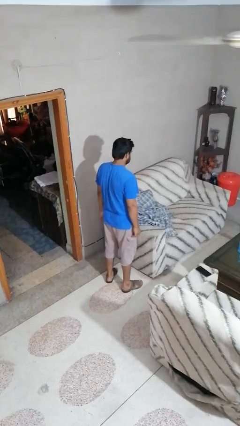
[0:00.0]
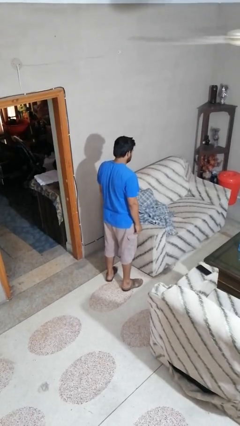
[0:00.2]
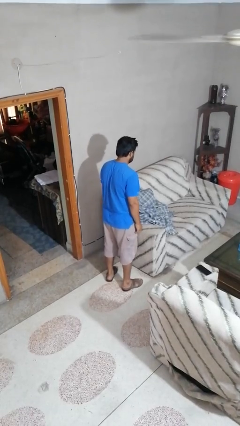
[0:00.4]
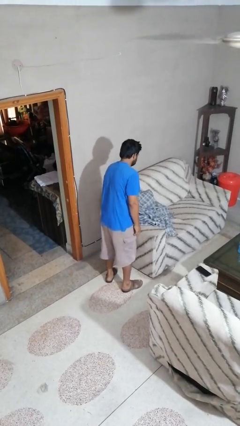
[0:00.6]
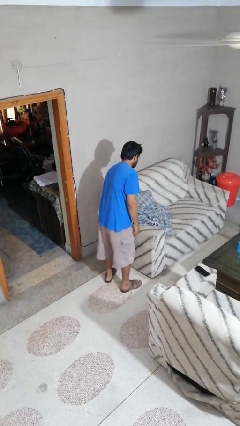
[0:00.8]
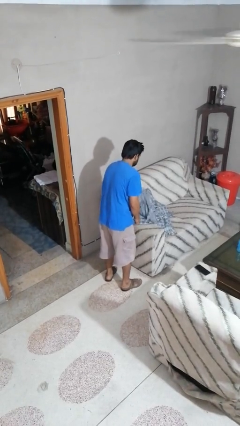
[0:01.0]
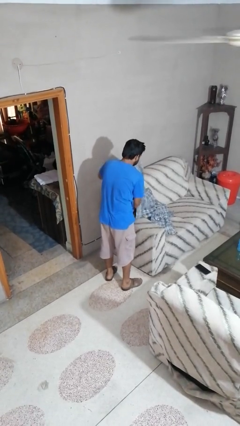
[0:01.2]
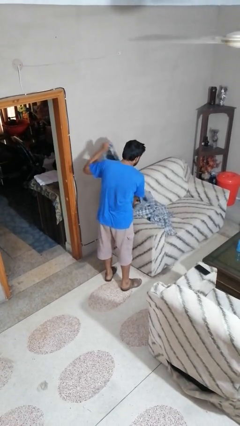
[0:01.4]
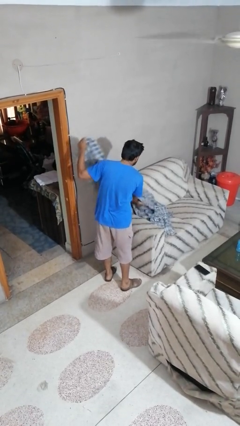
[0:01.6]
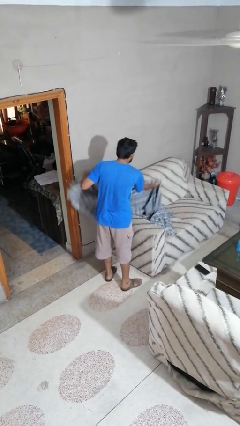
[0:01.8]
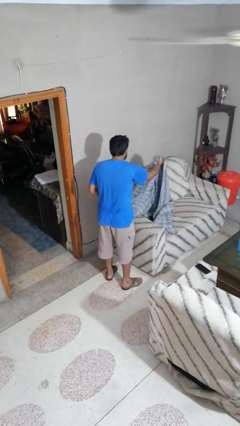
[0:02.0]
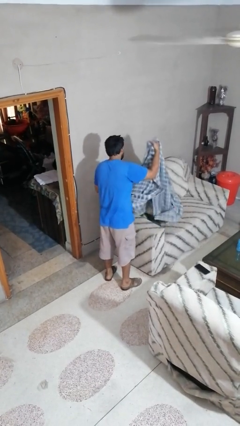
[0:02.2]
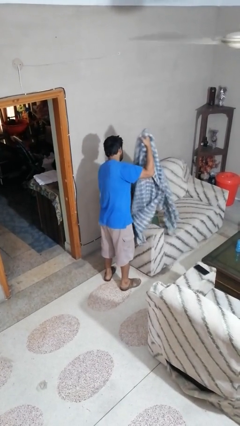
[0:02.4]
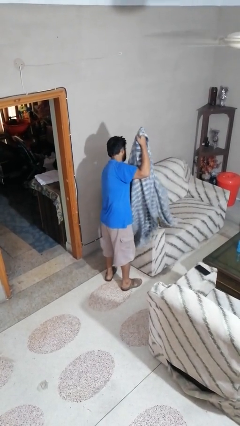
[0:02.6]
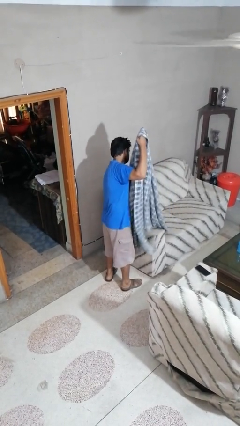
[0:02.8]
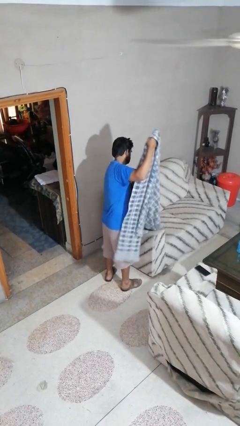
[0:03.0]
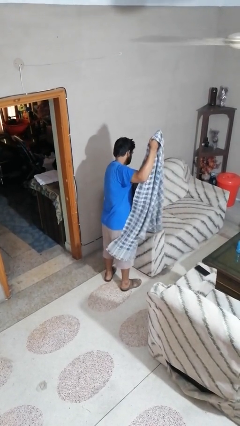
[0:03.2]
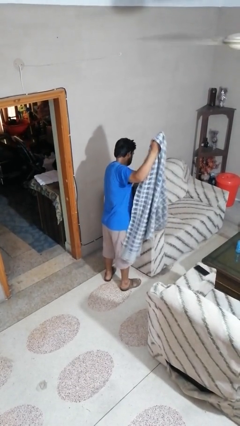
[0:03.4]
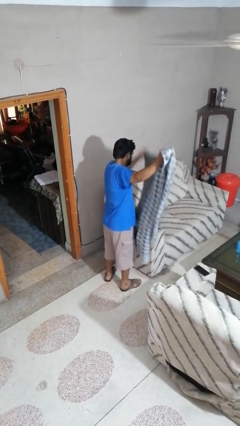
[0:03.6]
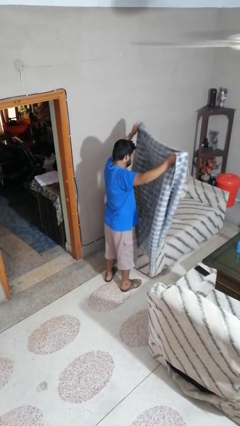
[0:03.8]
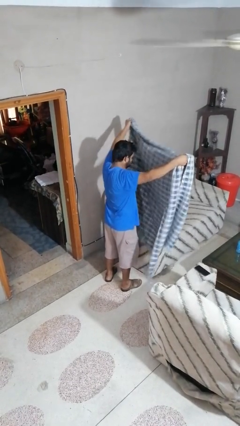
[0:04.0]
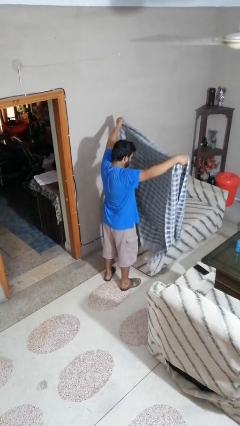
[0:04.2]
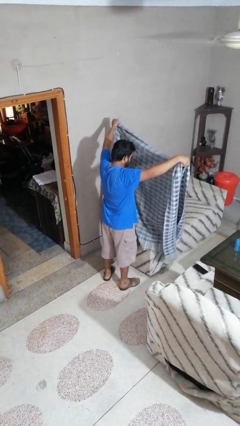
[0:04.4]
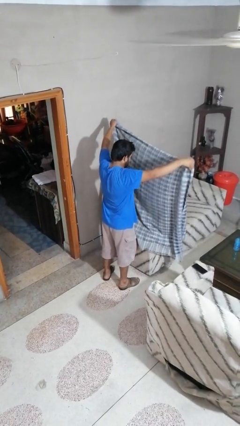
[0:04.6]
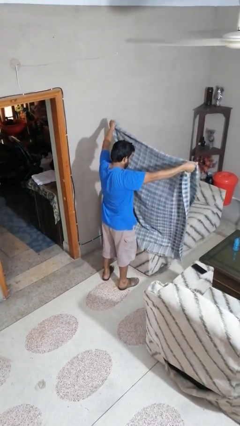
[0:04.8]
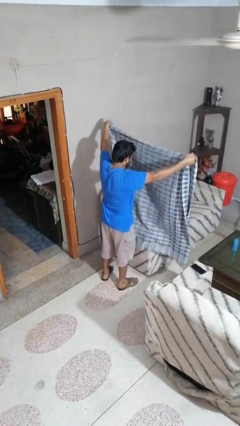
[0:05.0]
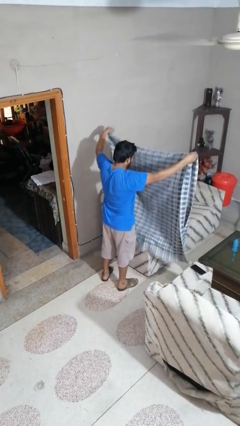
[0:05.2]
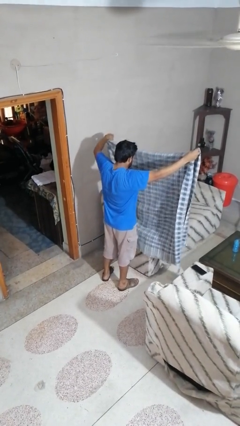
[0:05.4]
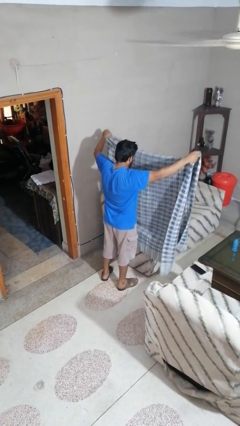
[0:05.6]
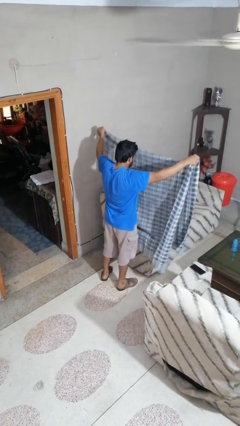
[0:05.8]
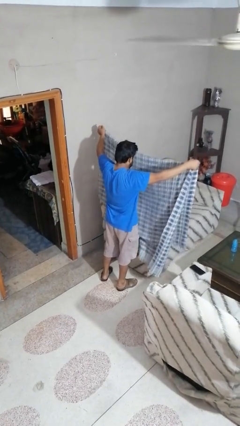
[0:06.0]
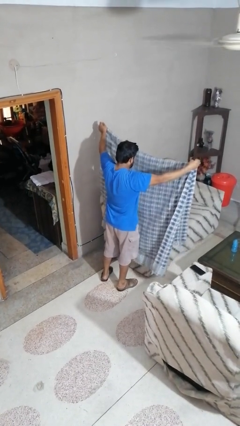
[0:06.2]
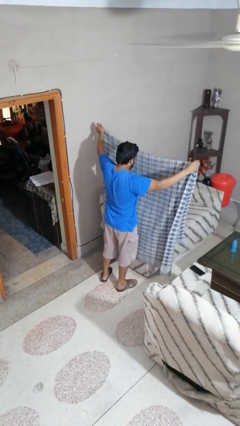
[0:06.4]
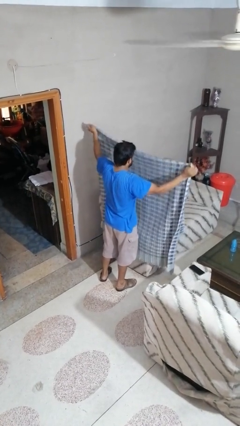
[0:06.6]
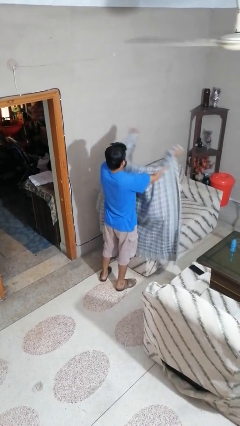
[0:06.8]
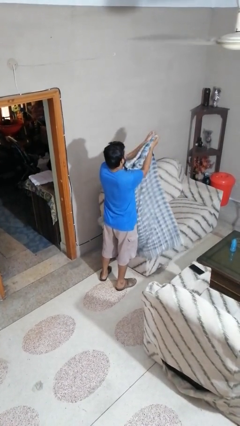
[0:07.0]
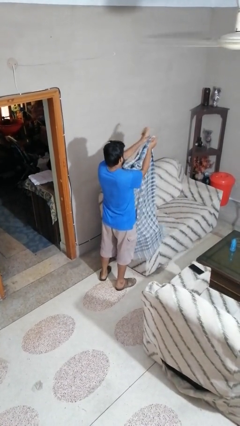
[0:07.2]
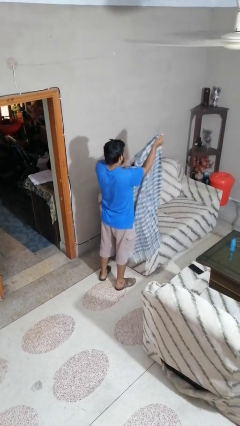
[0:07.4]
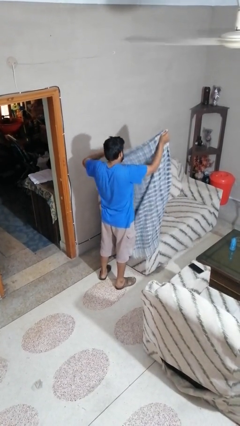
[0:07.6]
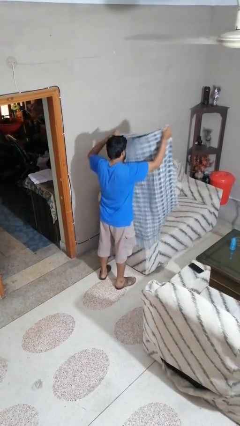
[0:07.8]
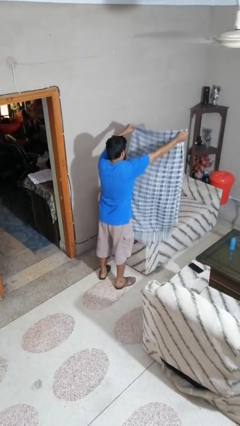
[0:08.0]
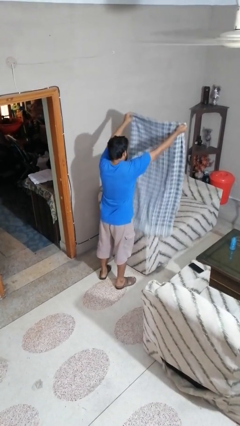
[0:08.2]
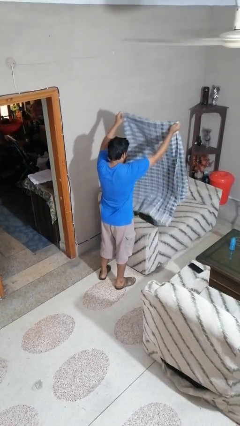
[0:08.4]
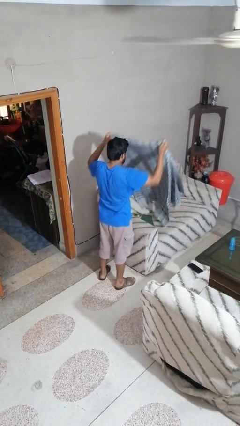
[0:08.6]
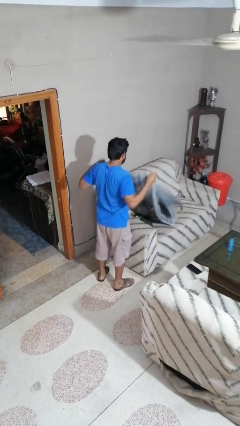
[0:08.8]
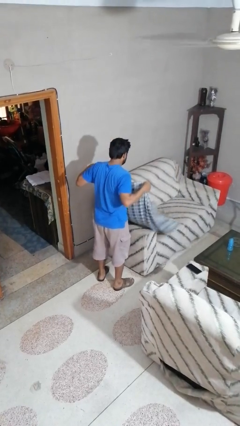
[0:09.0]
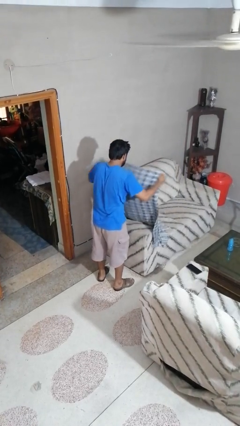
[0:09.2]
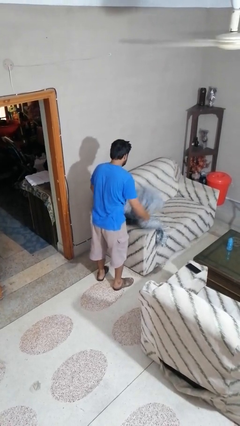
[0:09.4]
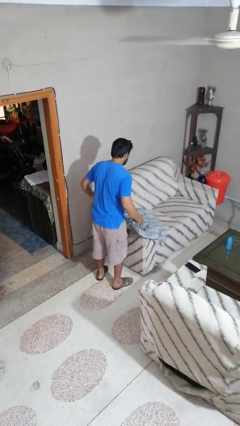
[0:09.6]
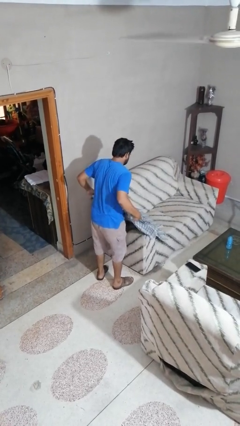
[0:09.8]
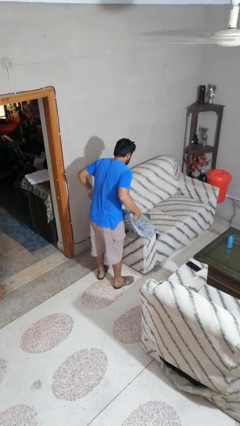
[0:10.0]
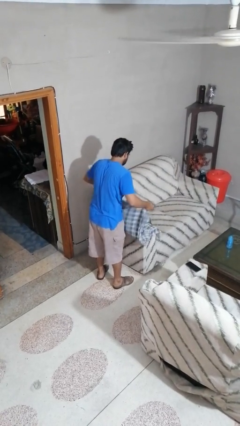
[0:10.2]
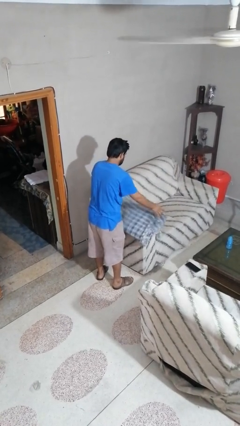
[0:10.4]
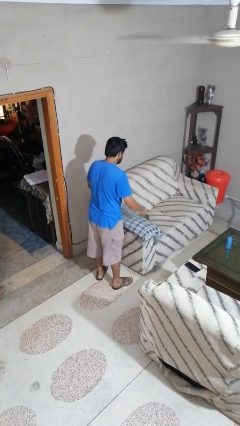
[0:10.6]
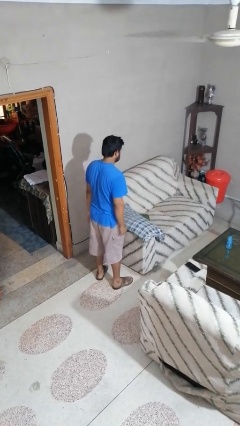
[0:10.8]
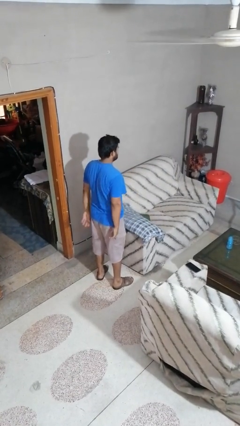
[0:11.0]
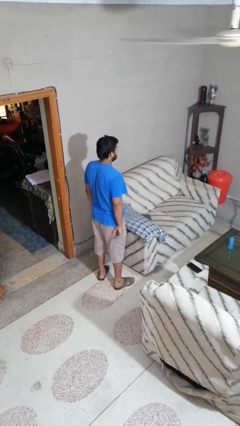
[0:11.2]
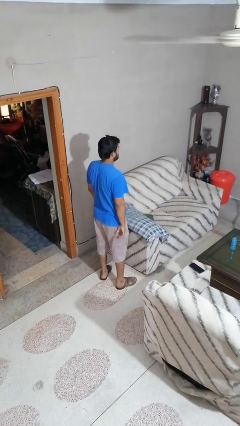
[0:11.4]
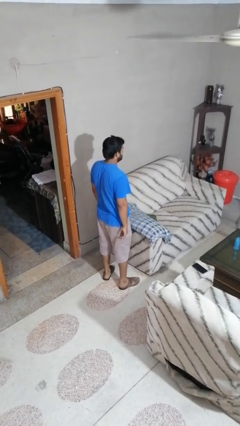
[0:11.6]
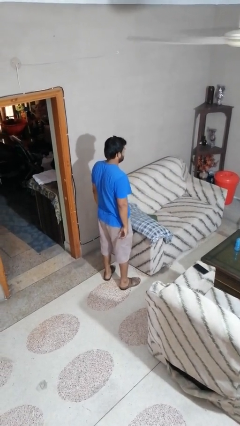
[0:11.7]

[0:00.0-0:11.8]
person folds blanket

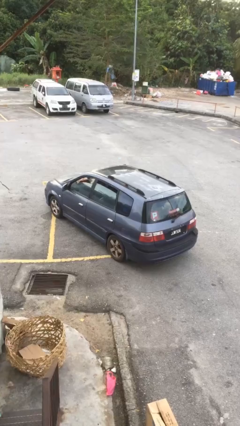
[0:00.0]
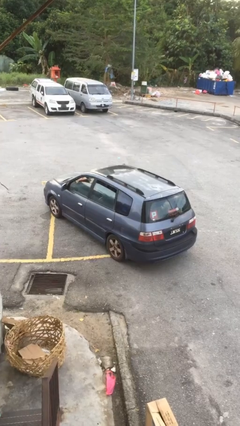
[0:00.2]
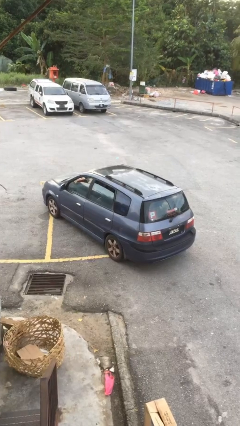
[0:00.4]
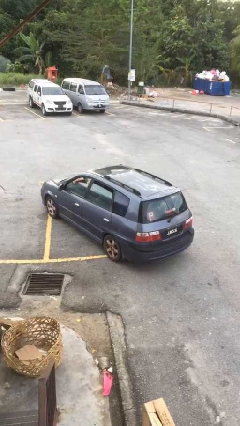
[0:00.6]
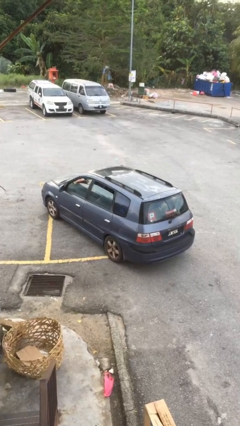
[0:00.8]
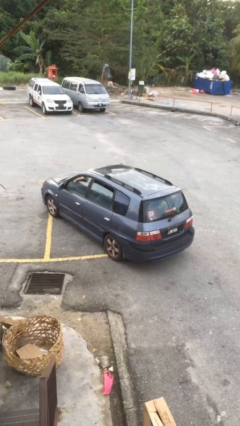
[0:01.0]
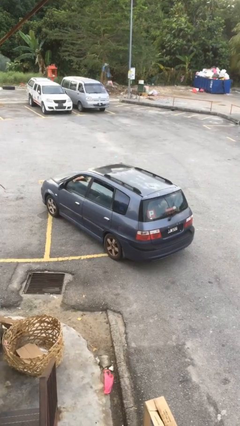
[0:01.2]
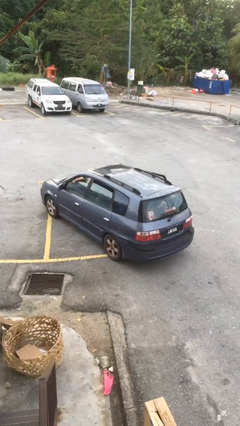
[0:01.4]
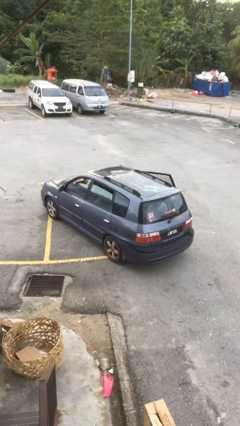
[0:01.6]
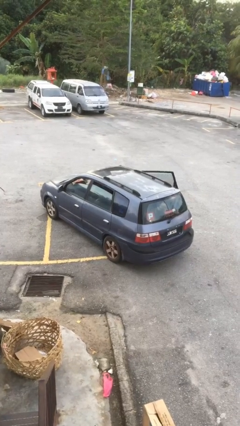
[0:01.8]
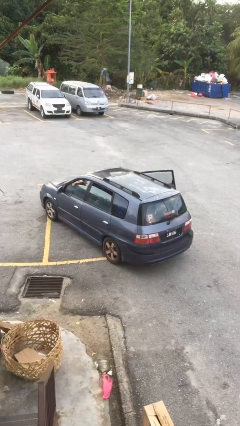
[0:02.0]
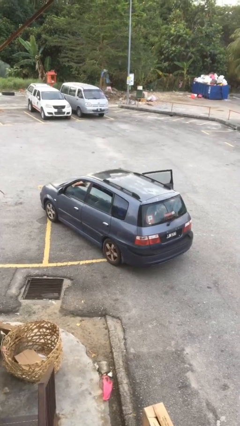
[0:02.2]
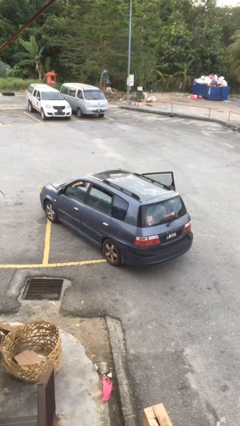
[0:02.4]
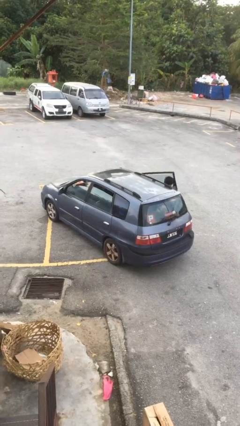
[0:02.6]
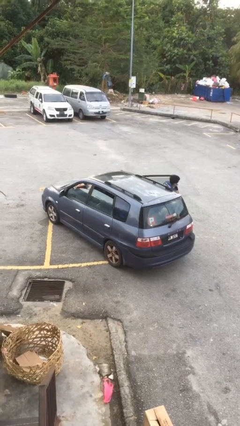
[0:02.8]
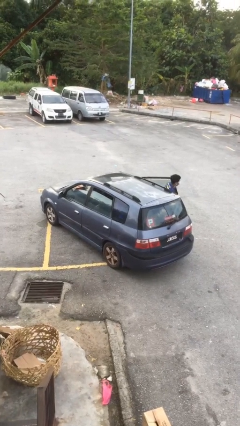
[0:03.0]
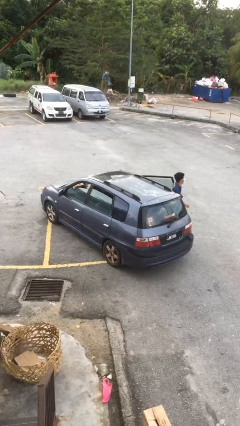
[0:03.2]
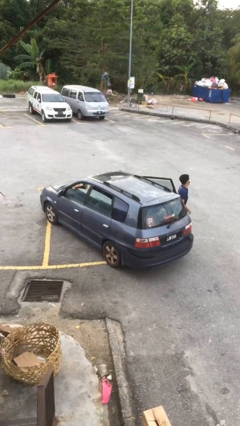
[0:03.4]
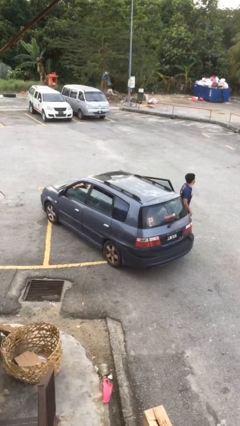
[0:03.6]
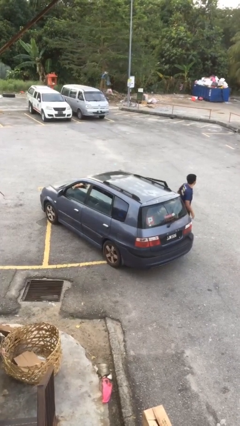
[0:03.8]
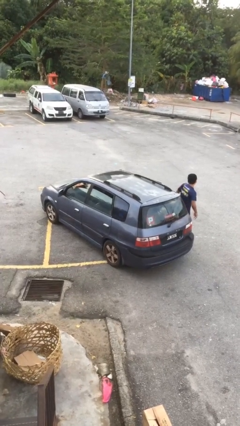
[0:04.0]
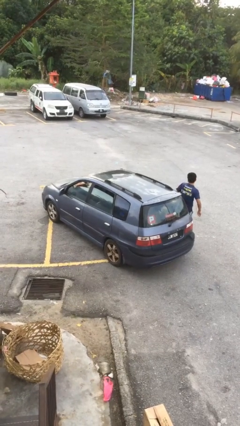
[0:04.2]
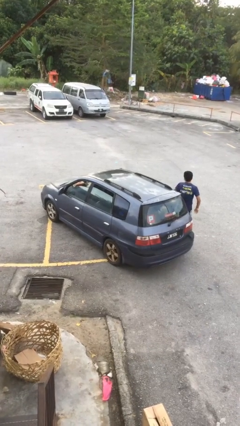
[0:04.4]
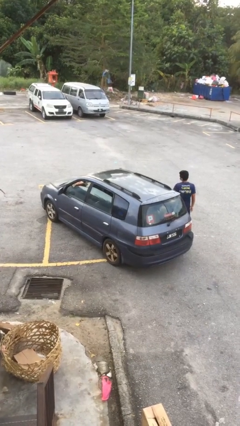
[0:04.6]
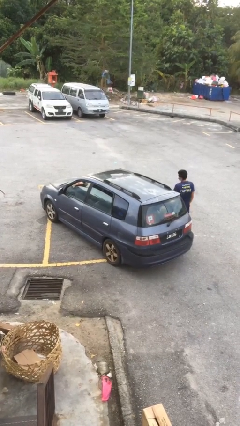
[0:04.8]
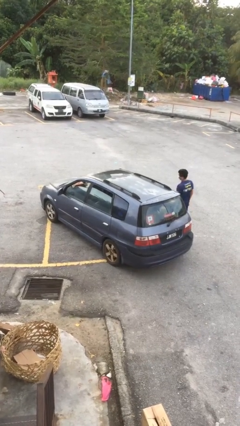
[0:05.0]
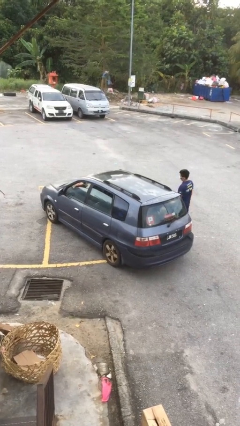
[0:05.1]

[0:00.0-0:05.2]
car drops off person

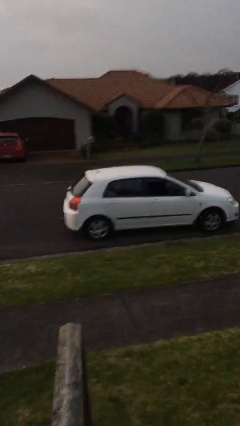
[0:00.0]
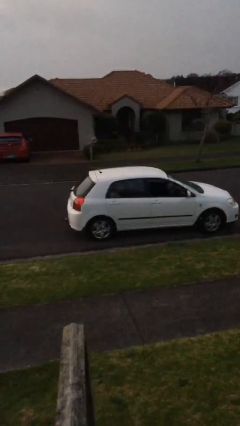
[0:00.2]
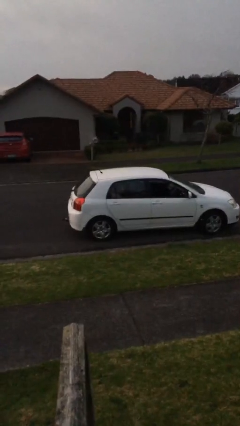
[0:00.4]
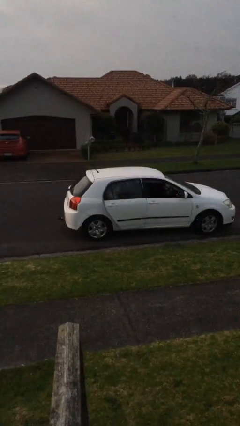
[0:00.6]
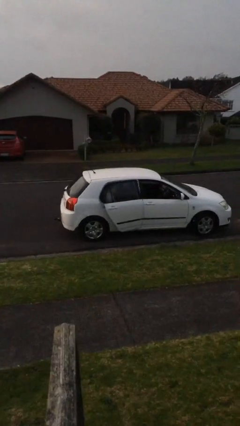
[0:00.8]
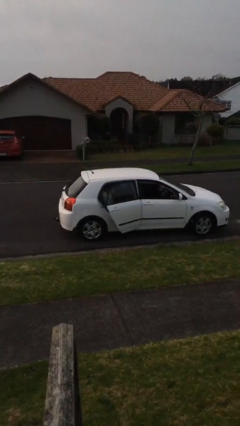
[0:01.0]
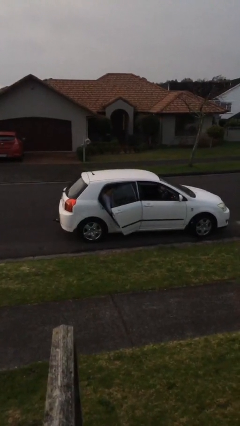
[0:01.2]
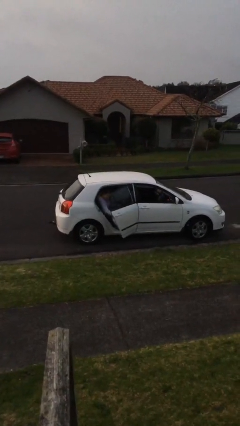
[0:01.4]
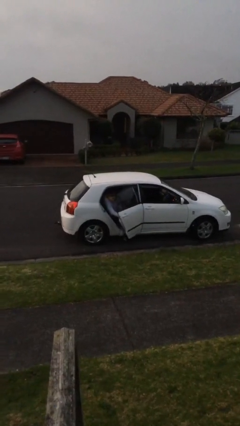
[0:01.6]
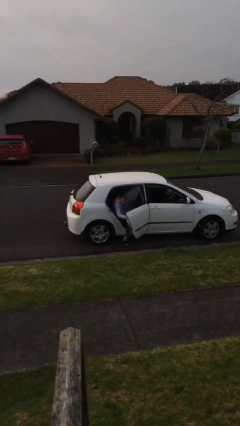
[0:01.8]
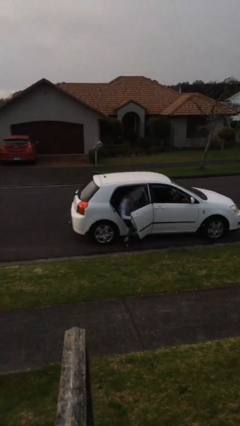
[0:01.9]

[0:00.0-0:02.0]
person opens car door
